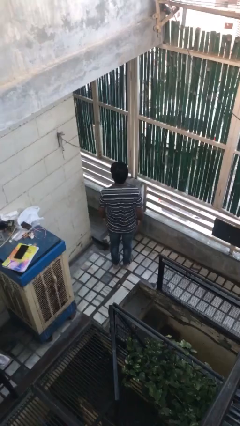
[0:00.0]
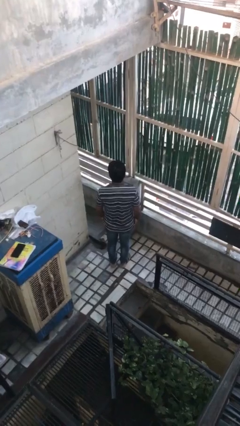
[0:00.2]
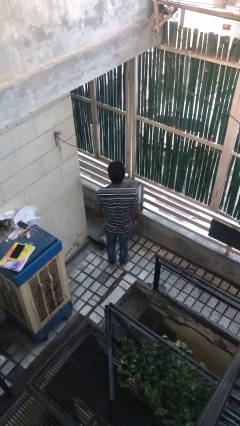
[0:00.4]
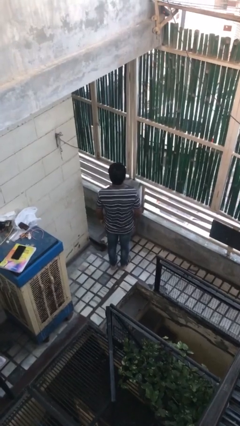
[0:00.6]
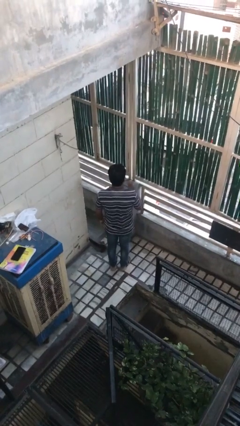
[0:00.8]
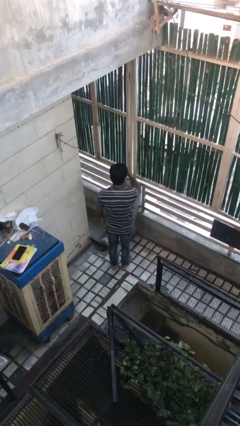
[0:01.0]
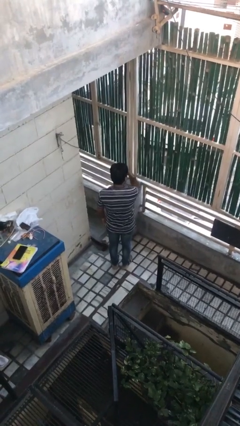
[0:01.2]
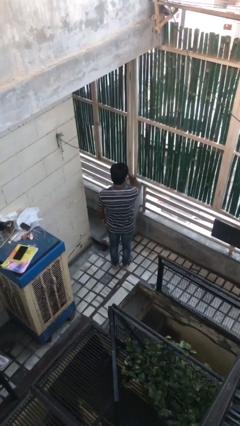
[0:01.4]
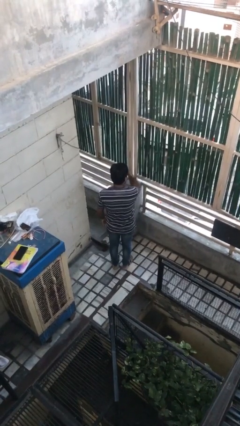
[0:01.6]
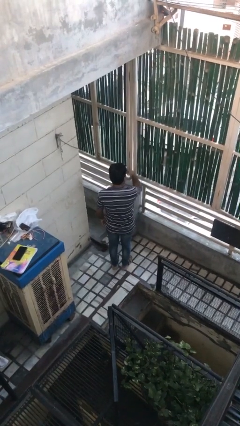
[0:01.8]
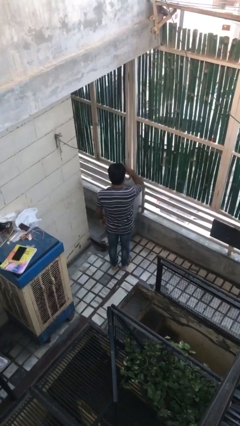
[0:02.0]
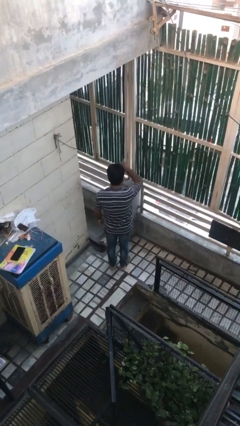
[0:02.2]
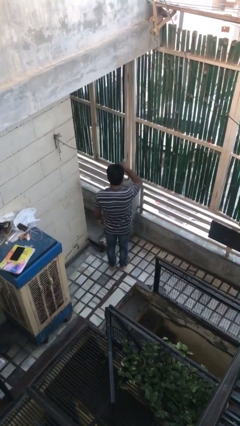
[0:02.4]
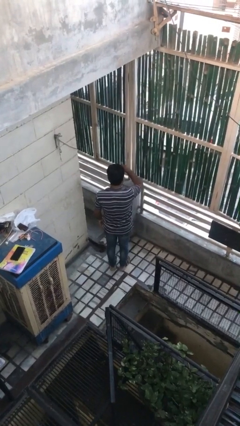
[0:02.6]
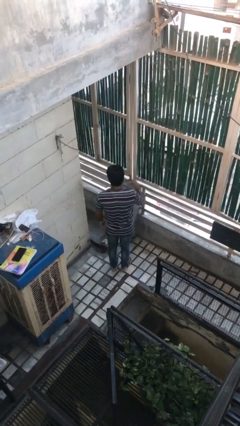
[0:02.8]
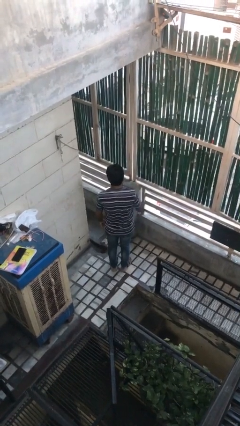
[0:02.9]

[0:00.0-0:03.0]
person gestures watch closely

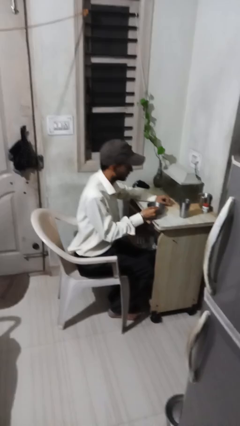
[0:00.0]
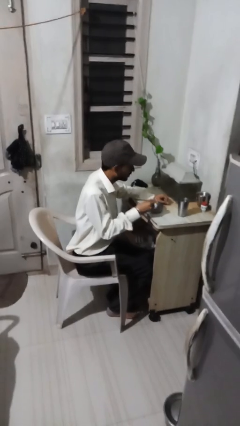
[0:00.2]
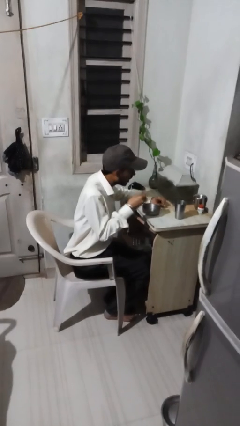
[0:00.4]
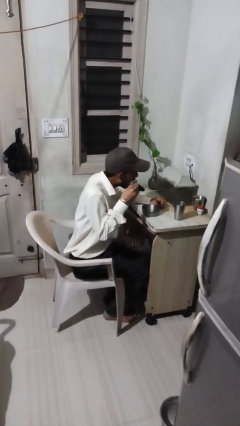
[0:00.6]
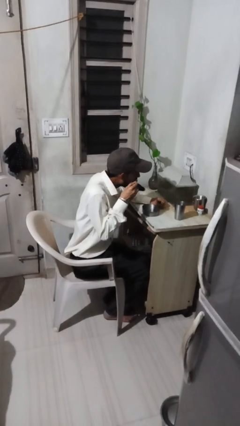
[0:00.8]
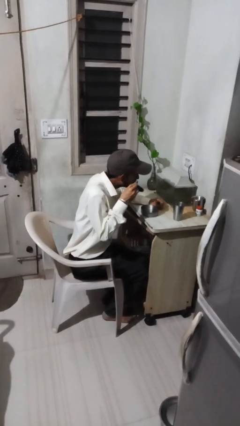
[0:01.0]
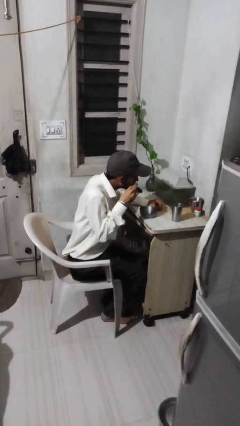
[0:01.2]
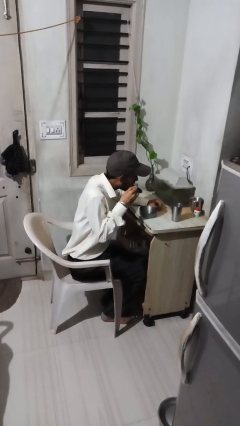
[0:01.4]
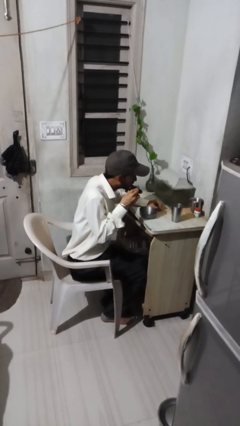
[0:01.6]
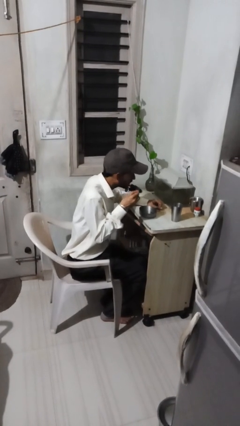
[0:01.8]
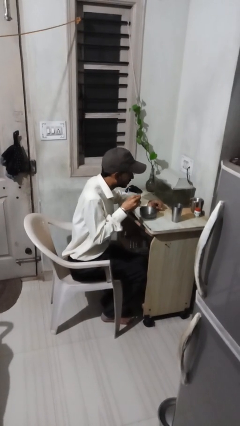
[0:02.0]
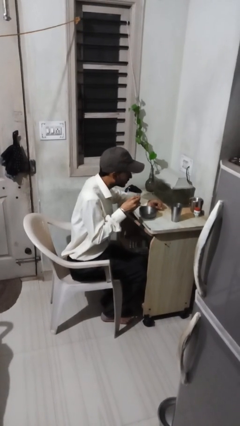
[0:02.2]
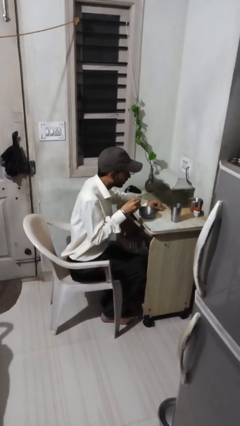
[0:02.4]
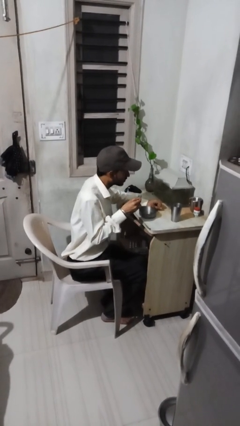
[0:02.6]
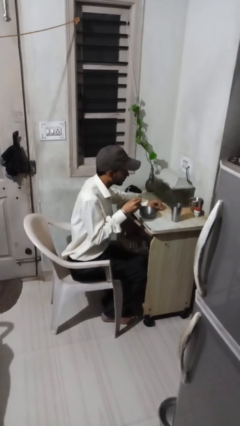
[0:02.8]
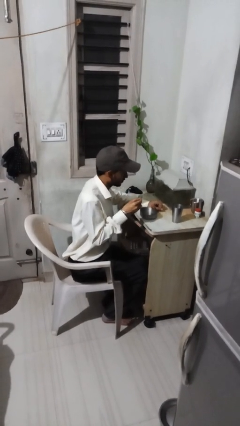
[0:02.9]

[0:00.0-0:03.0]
person eats with utensil

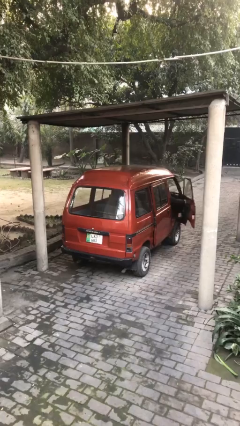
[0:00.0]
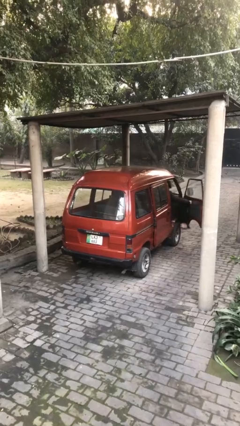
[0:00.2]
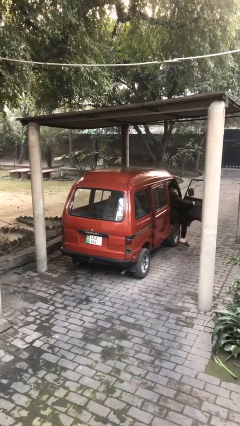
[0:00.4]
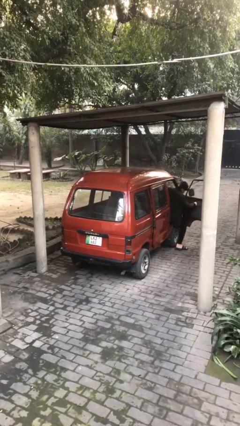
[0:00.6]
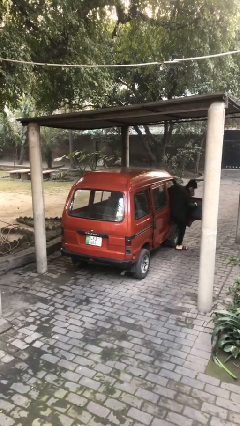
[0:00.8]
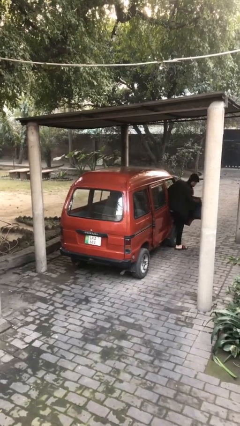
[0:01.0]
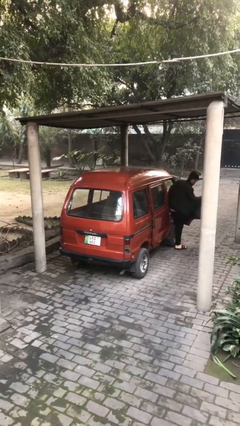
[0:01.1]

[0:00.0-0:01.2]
car drops off person

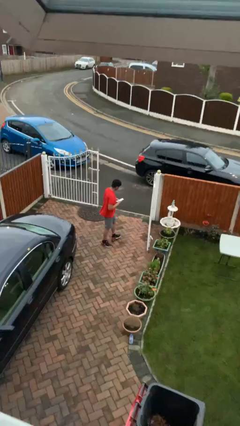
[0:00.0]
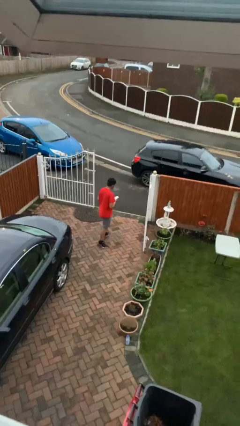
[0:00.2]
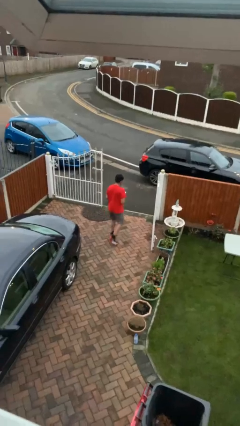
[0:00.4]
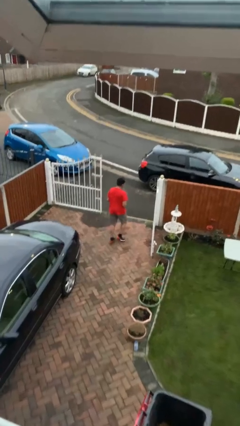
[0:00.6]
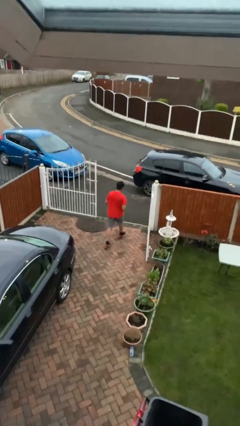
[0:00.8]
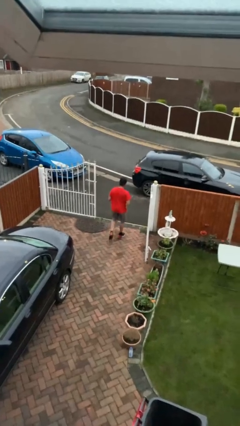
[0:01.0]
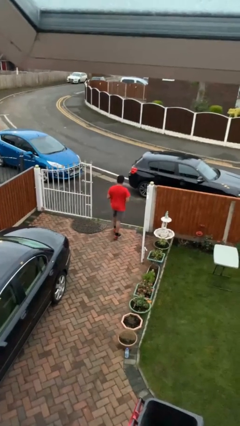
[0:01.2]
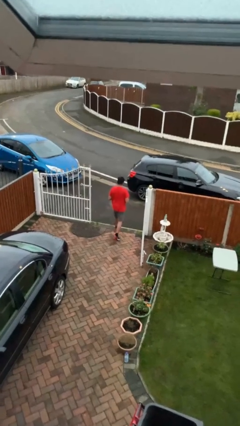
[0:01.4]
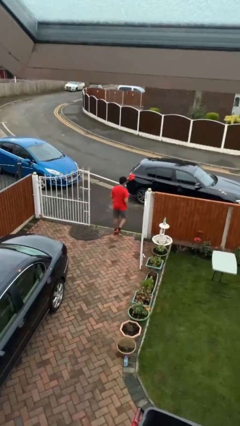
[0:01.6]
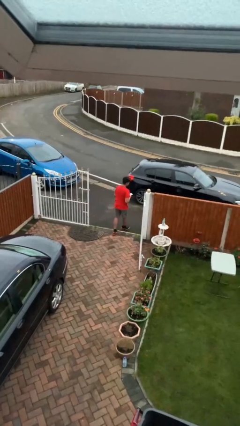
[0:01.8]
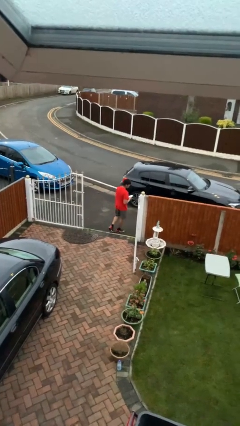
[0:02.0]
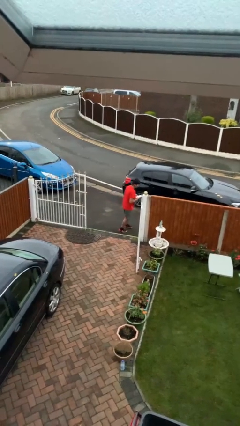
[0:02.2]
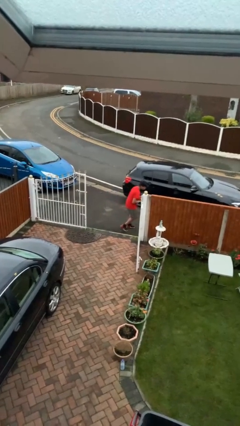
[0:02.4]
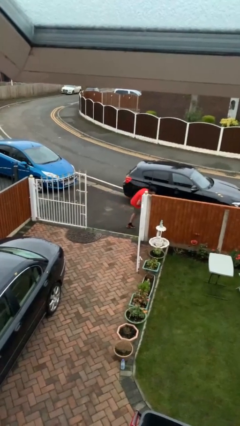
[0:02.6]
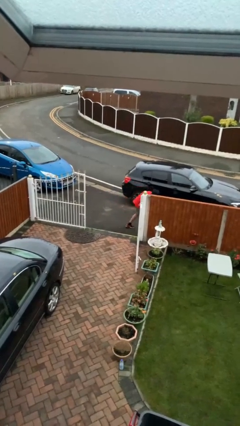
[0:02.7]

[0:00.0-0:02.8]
person exits scene through structure

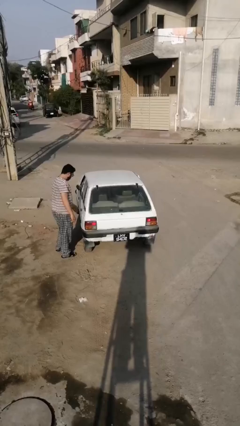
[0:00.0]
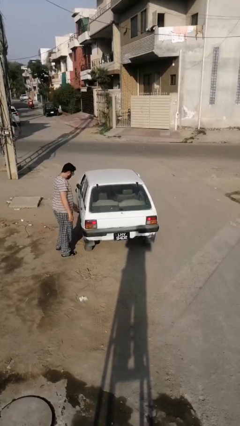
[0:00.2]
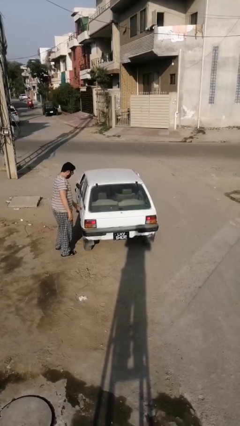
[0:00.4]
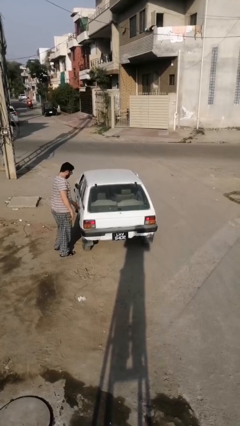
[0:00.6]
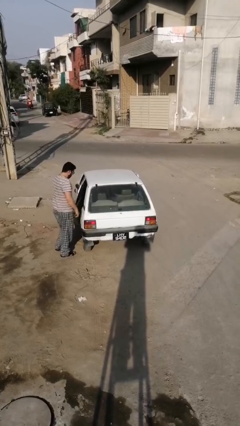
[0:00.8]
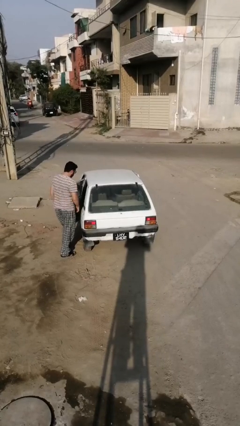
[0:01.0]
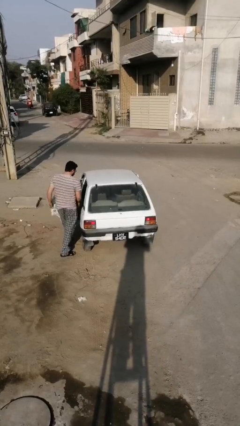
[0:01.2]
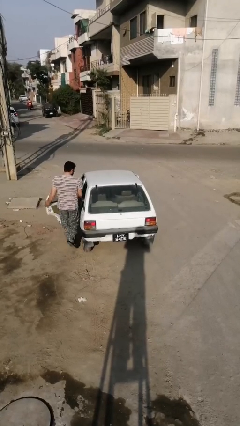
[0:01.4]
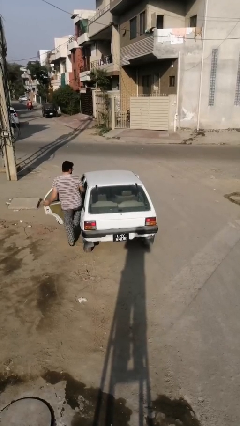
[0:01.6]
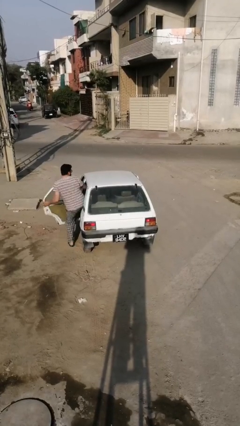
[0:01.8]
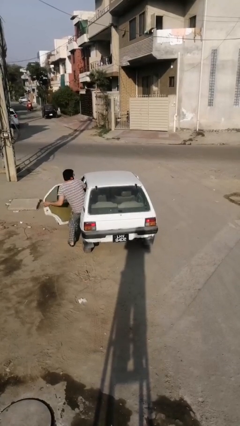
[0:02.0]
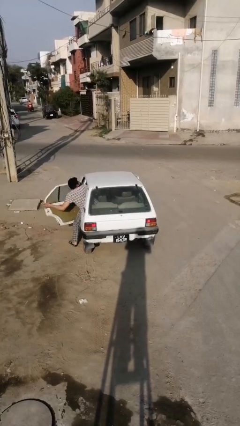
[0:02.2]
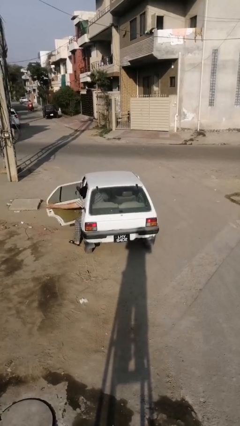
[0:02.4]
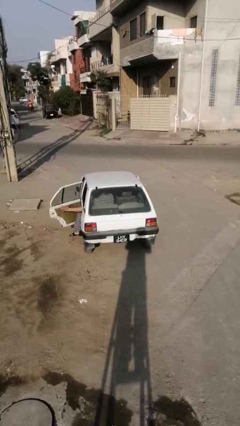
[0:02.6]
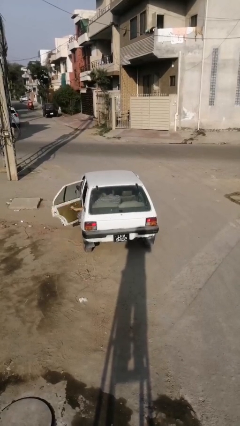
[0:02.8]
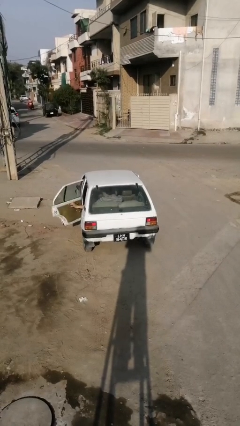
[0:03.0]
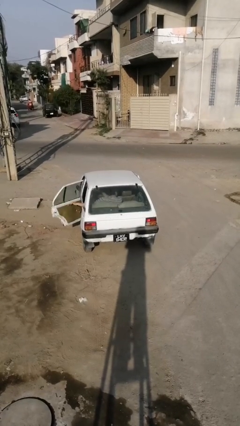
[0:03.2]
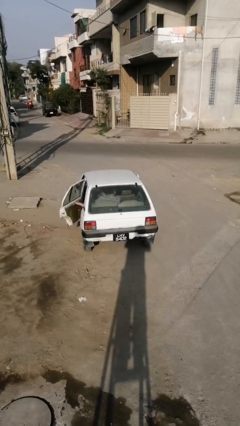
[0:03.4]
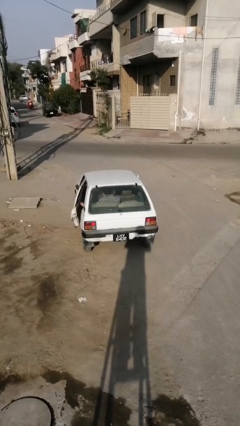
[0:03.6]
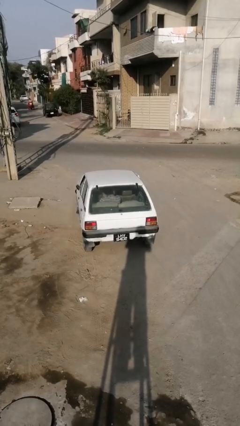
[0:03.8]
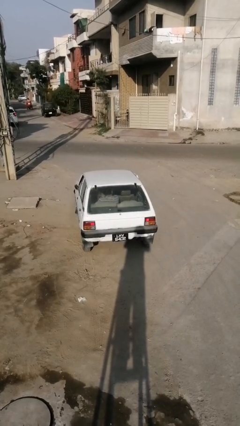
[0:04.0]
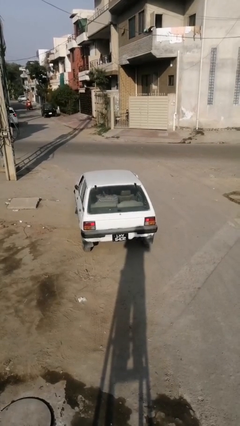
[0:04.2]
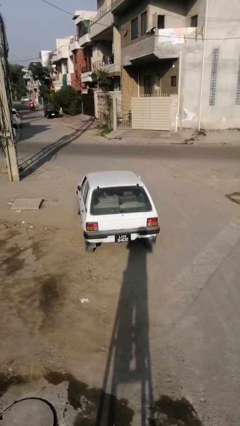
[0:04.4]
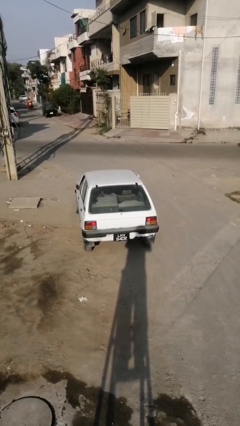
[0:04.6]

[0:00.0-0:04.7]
car picks up person

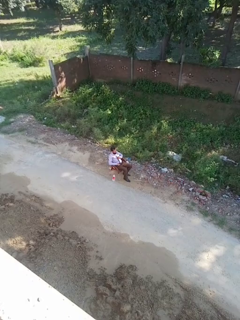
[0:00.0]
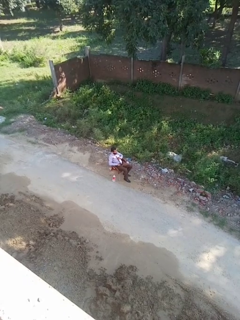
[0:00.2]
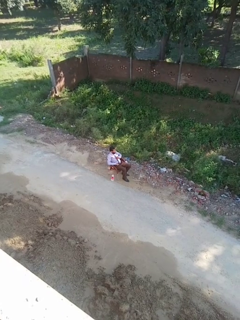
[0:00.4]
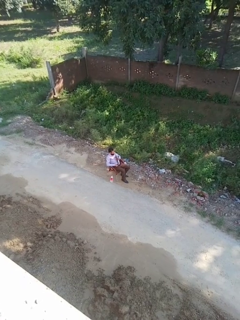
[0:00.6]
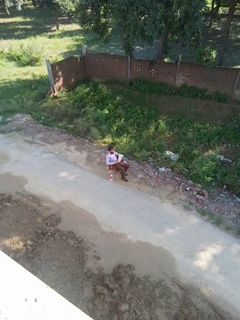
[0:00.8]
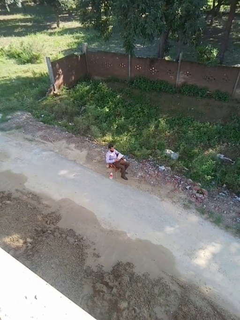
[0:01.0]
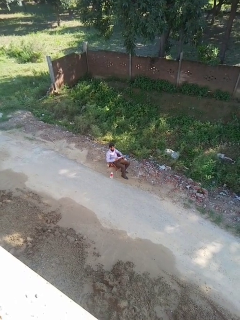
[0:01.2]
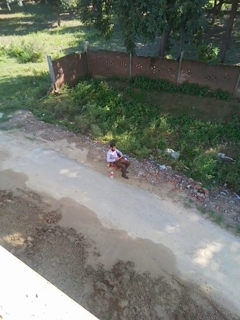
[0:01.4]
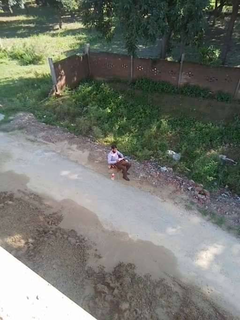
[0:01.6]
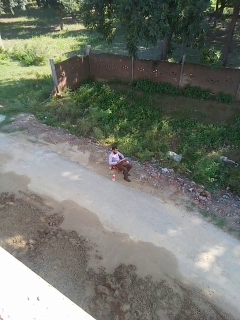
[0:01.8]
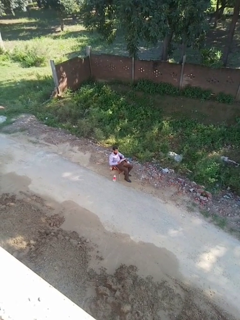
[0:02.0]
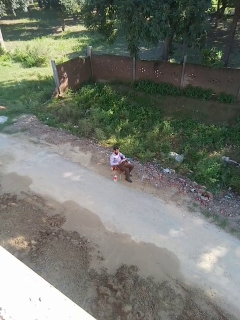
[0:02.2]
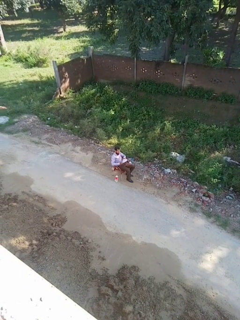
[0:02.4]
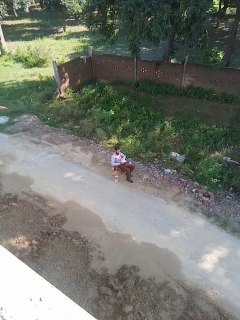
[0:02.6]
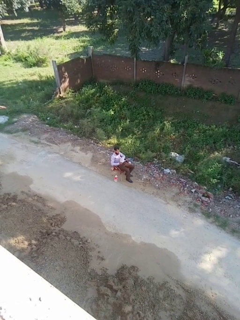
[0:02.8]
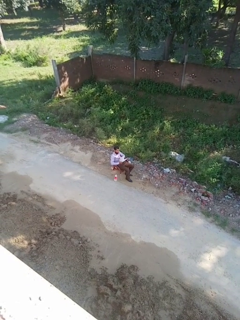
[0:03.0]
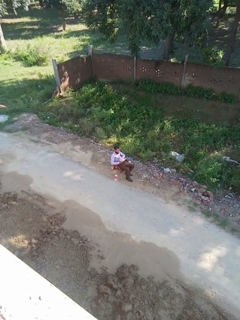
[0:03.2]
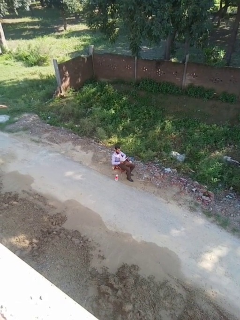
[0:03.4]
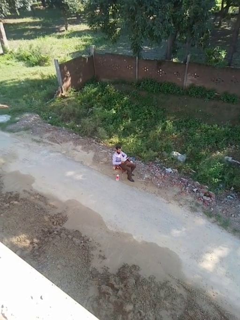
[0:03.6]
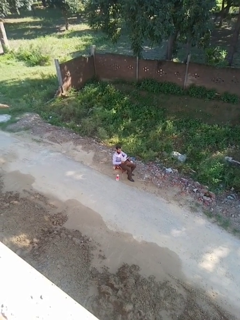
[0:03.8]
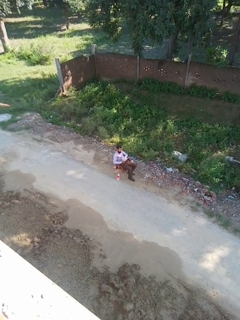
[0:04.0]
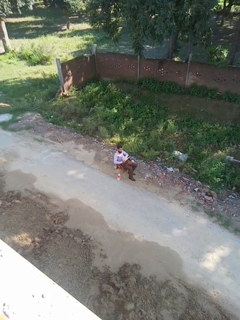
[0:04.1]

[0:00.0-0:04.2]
person reads magazine
